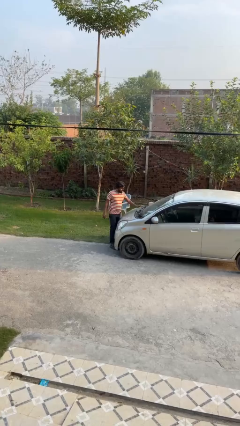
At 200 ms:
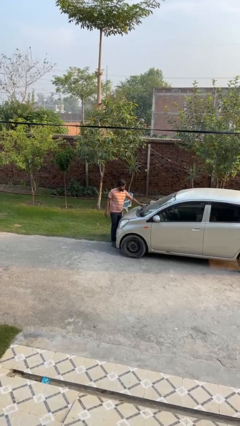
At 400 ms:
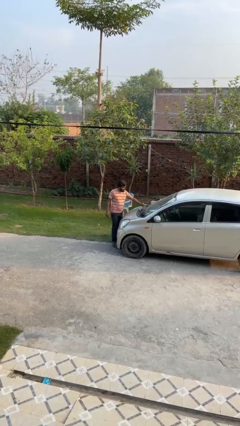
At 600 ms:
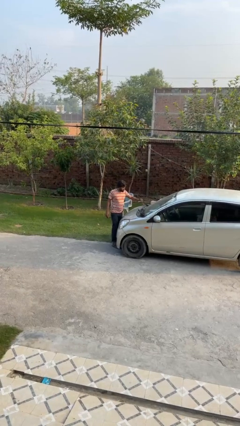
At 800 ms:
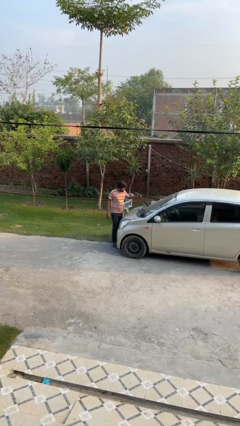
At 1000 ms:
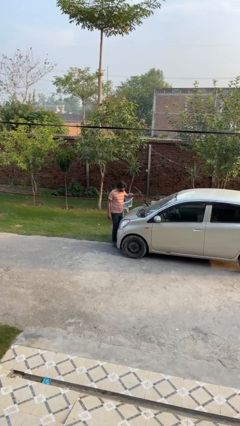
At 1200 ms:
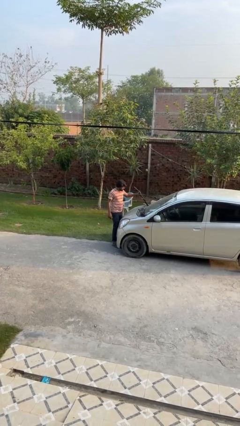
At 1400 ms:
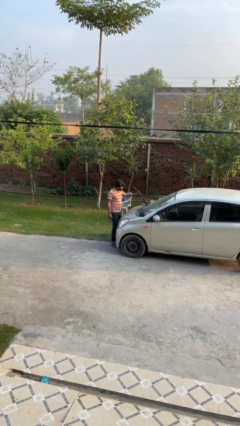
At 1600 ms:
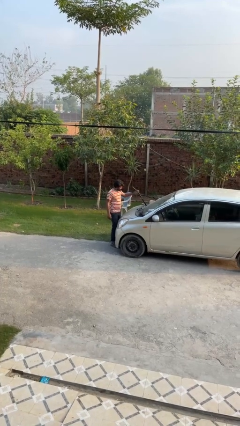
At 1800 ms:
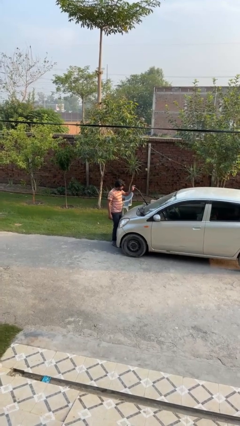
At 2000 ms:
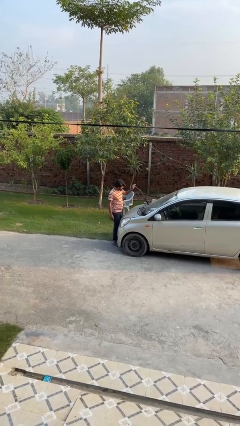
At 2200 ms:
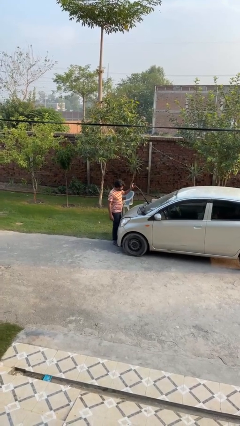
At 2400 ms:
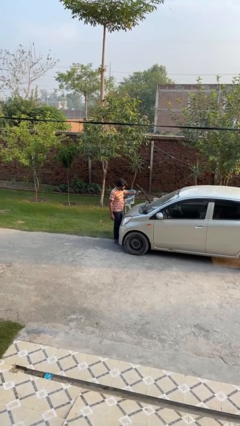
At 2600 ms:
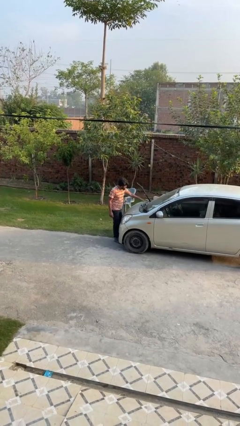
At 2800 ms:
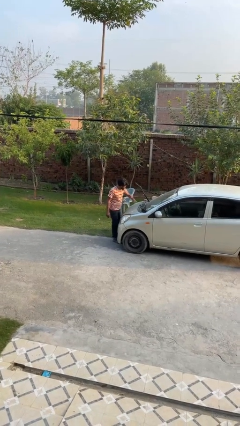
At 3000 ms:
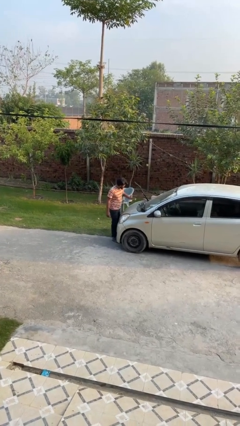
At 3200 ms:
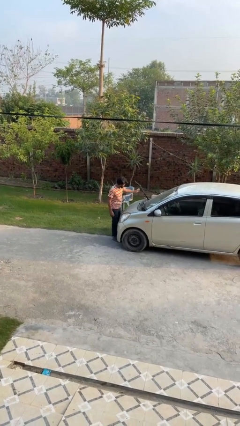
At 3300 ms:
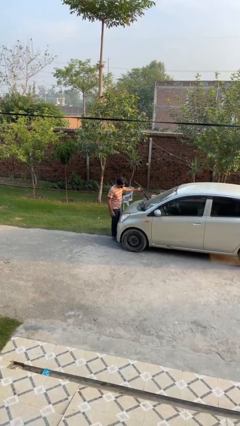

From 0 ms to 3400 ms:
person flips up car wipers

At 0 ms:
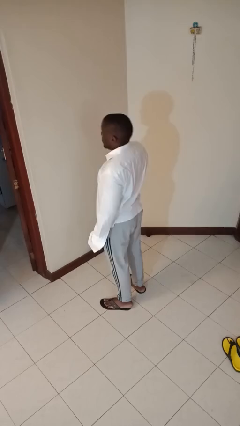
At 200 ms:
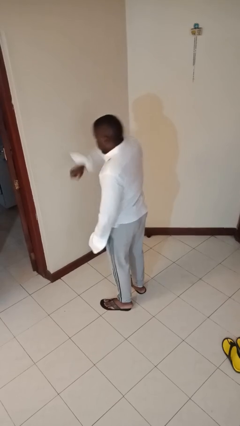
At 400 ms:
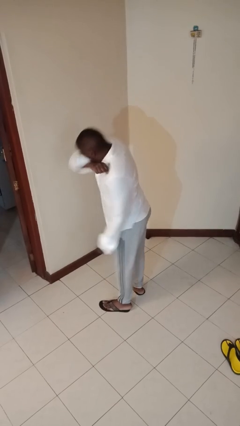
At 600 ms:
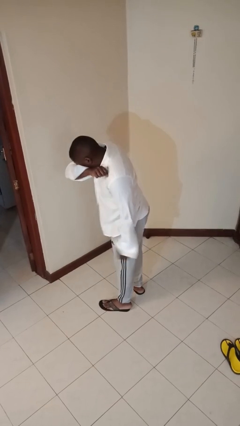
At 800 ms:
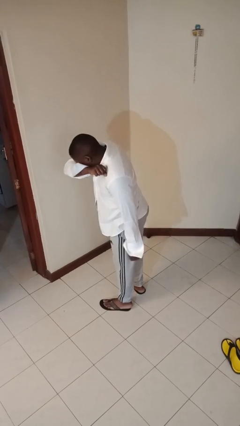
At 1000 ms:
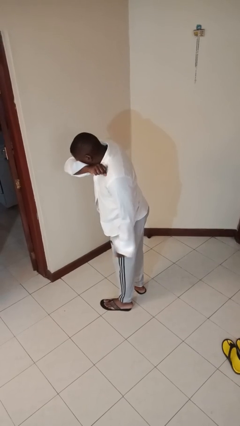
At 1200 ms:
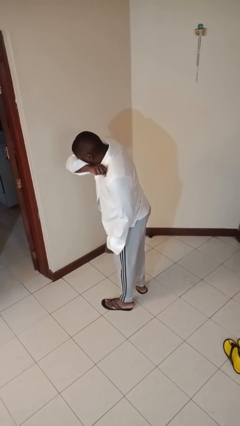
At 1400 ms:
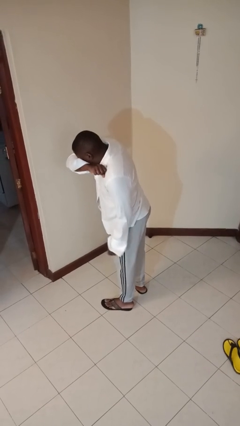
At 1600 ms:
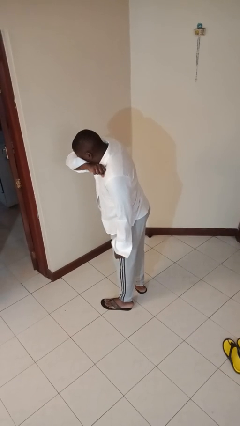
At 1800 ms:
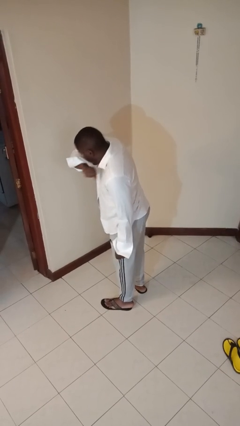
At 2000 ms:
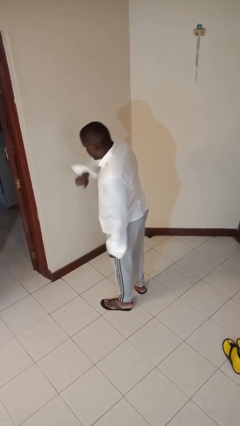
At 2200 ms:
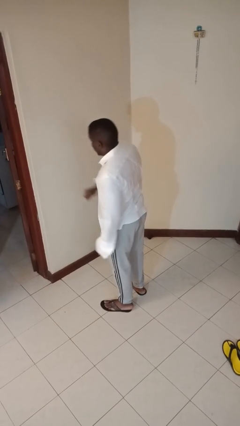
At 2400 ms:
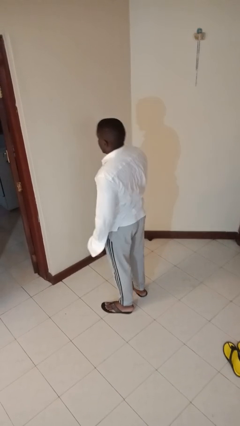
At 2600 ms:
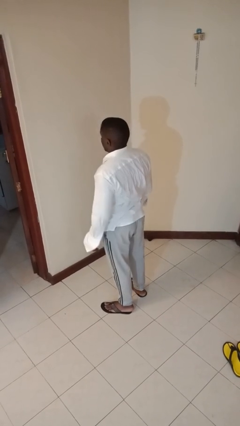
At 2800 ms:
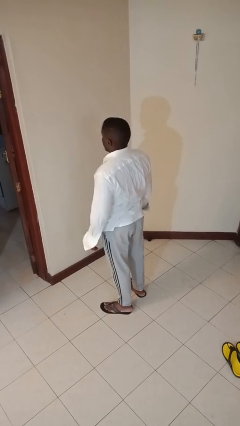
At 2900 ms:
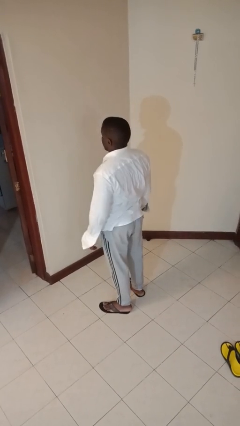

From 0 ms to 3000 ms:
person sneezes into arm

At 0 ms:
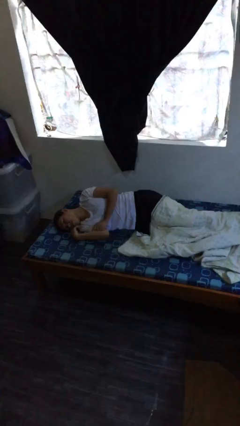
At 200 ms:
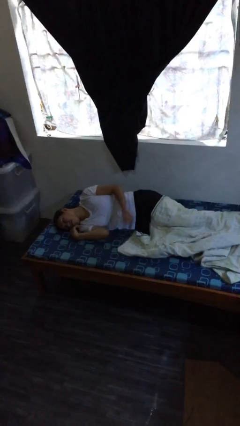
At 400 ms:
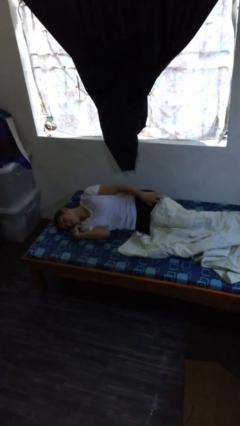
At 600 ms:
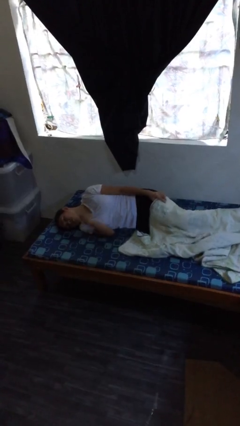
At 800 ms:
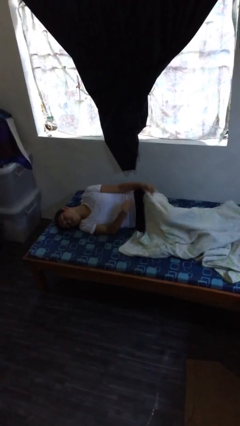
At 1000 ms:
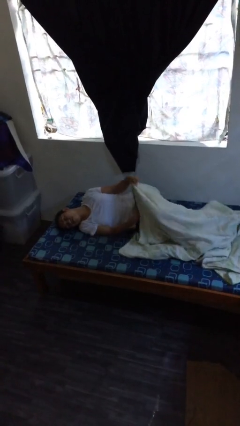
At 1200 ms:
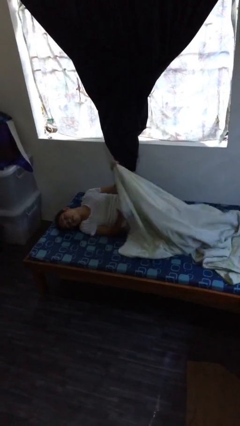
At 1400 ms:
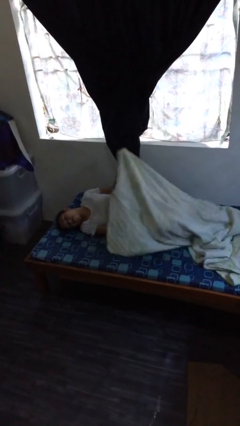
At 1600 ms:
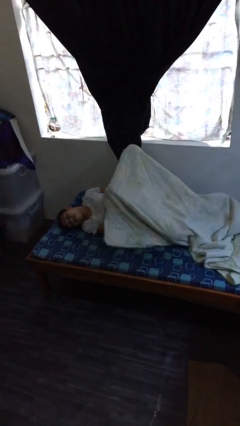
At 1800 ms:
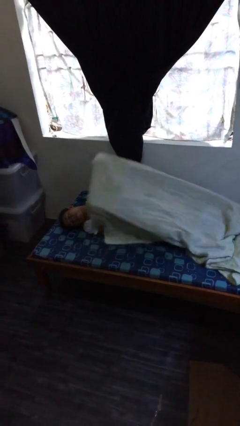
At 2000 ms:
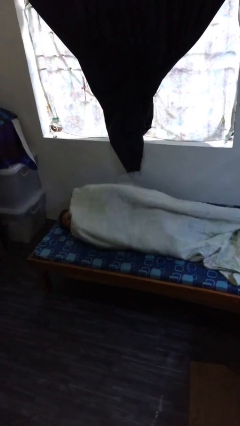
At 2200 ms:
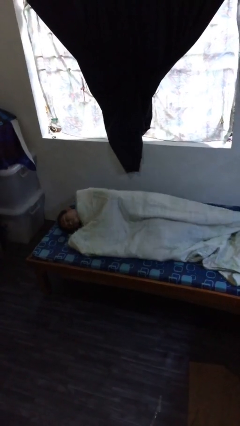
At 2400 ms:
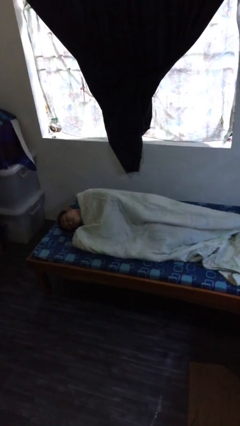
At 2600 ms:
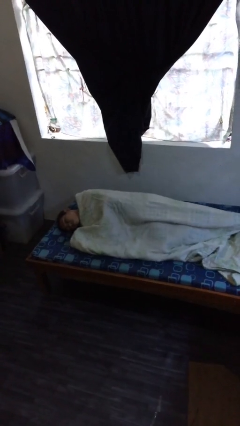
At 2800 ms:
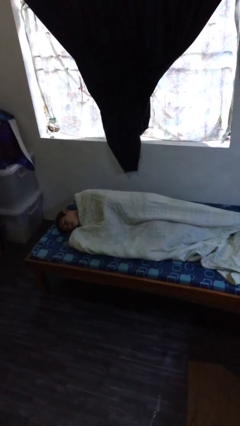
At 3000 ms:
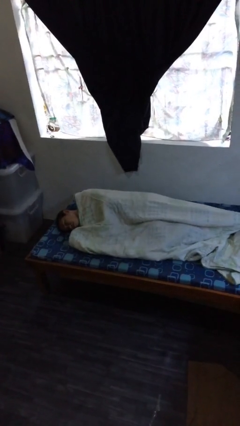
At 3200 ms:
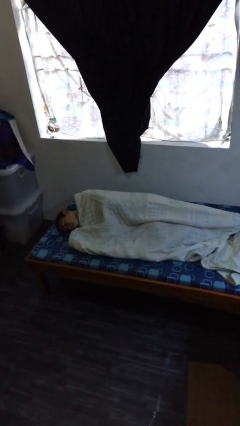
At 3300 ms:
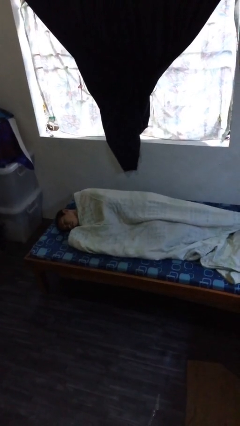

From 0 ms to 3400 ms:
person covers with bedsheets

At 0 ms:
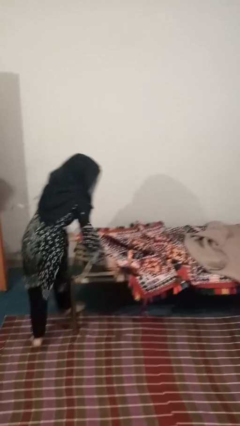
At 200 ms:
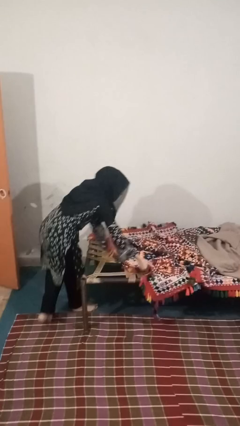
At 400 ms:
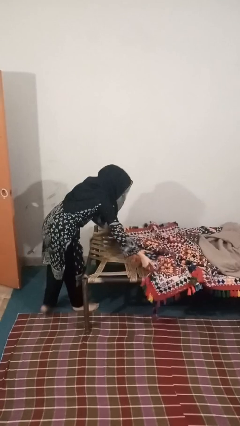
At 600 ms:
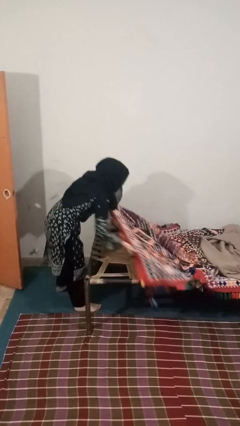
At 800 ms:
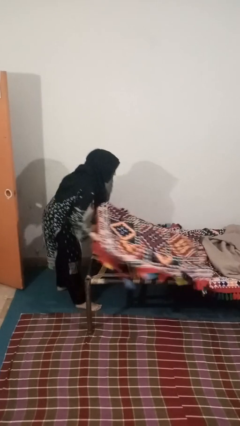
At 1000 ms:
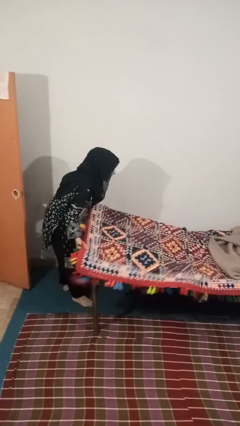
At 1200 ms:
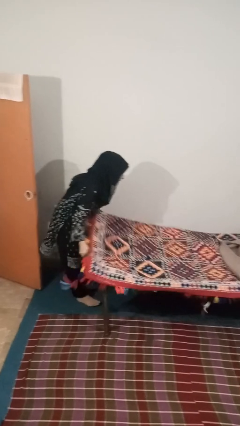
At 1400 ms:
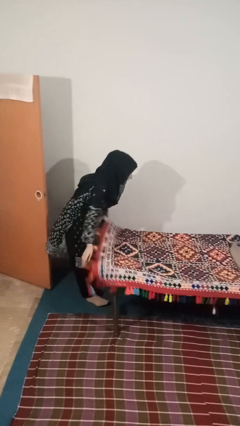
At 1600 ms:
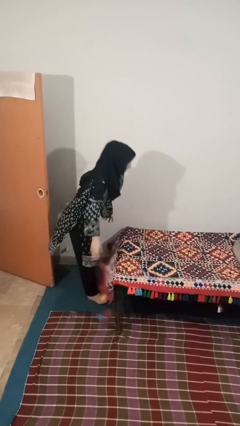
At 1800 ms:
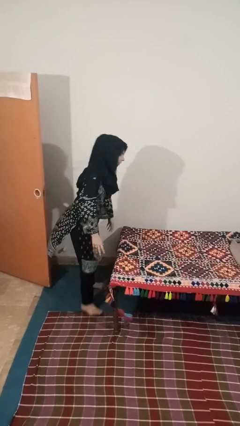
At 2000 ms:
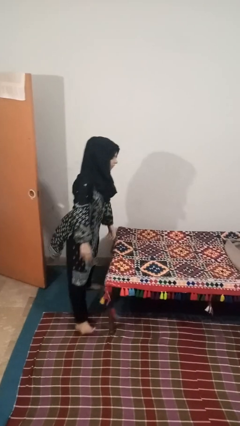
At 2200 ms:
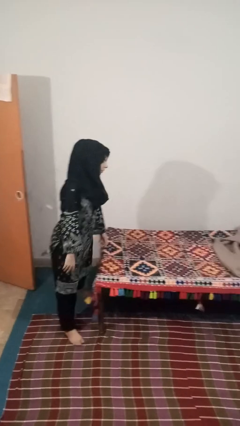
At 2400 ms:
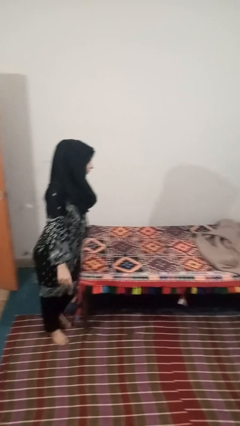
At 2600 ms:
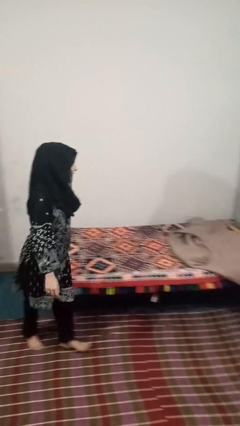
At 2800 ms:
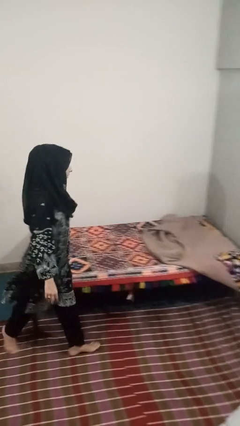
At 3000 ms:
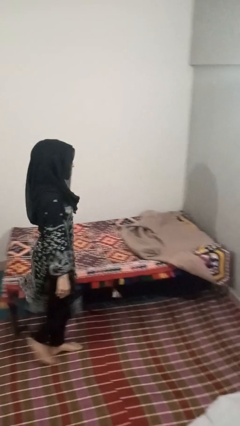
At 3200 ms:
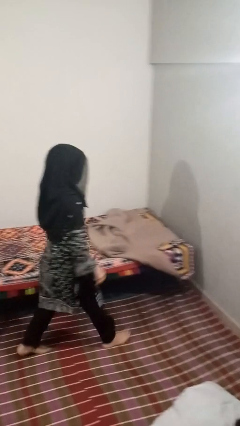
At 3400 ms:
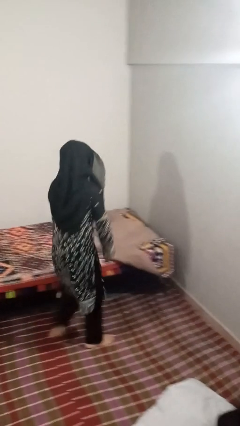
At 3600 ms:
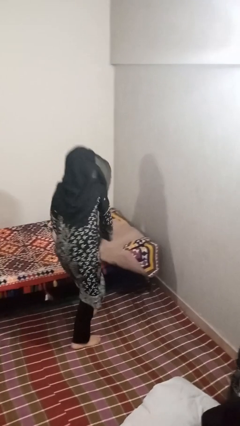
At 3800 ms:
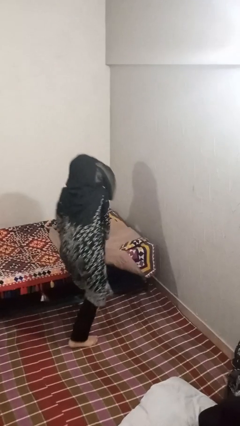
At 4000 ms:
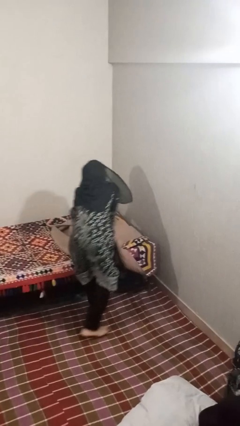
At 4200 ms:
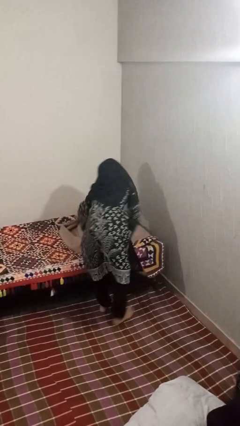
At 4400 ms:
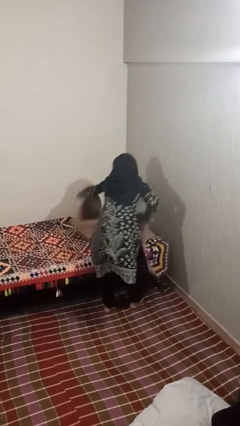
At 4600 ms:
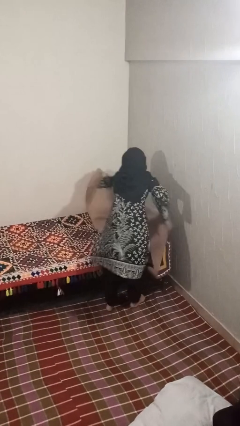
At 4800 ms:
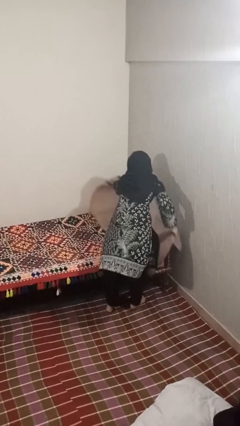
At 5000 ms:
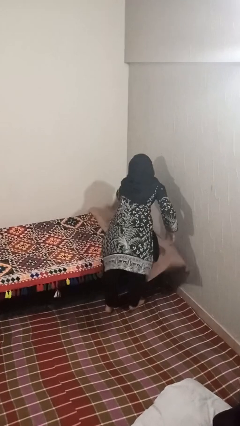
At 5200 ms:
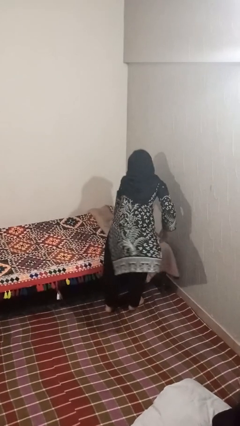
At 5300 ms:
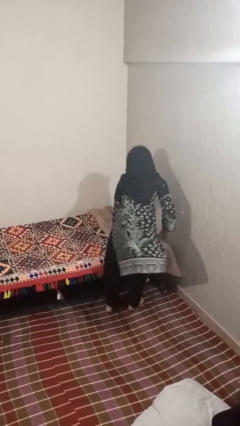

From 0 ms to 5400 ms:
person makes bed

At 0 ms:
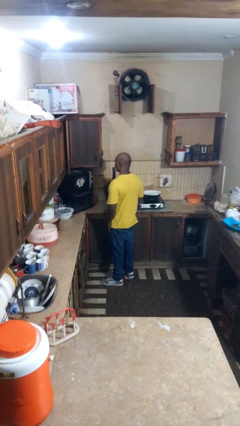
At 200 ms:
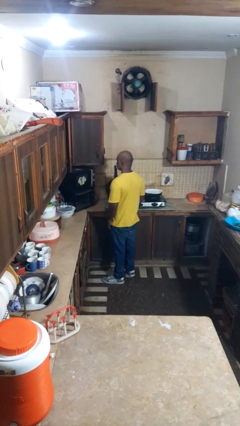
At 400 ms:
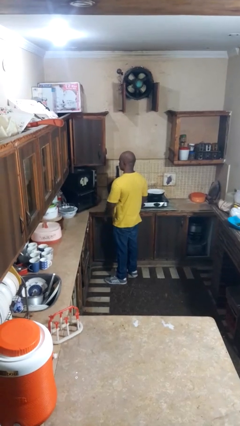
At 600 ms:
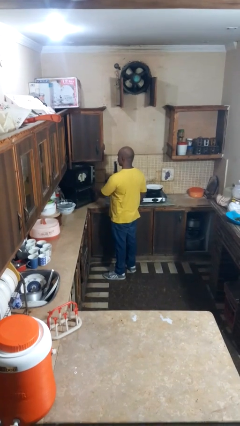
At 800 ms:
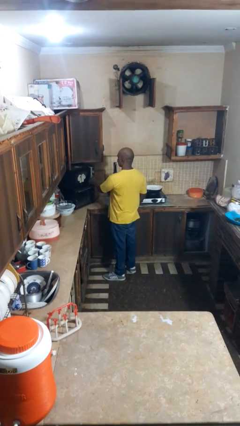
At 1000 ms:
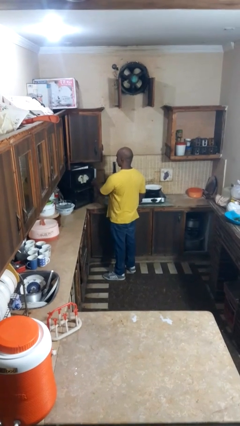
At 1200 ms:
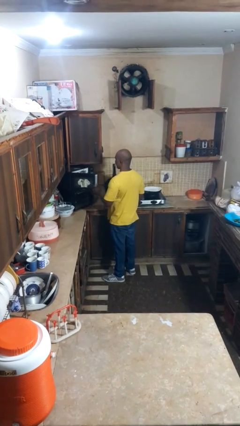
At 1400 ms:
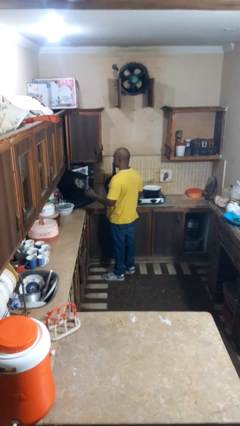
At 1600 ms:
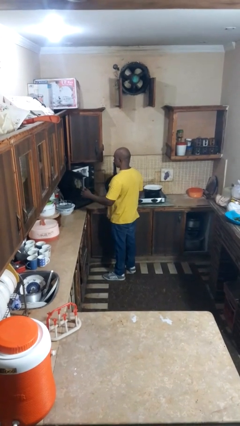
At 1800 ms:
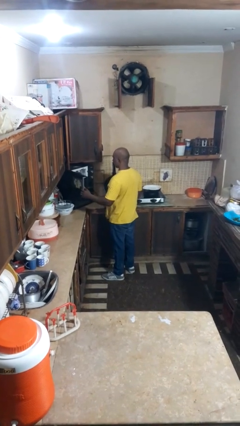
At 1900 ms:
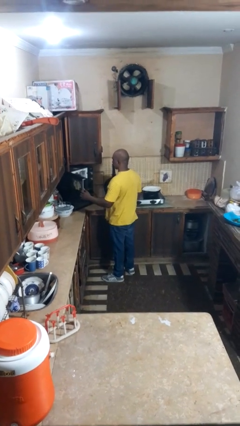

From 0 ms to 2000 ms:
person opens microwave

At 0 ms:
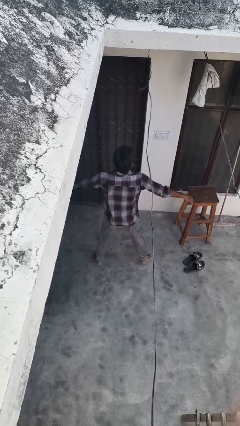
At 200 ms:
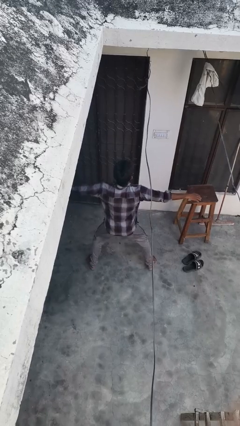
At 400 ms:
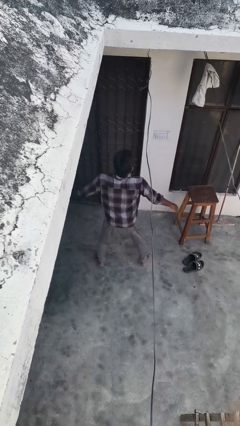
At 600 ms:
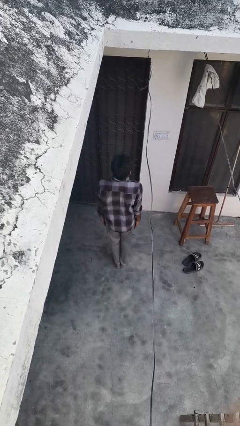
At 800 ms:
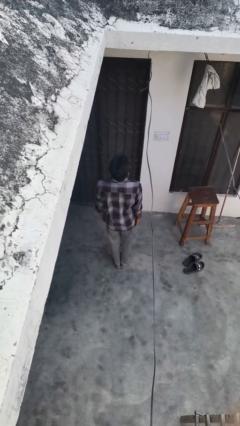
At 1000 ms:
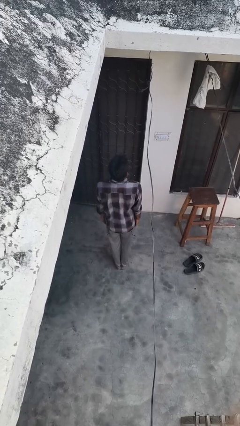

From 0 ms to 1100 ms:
person exercises with jumping jacks
